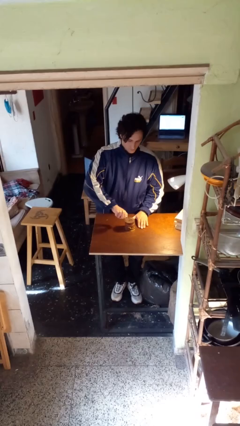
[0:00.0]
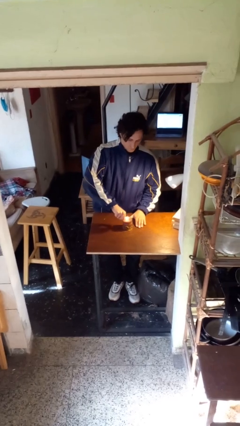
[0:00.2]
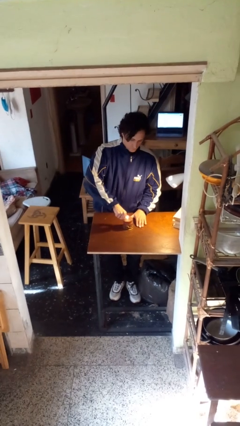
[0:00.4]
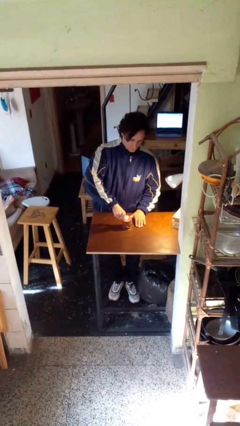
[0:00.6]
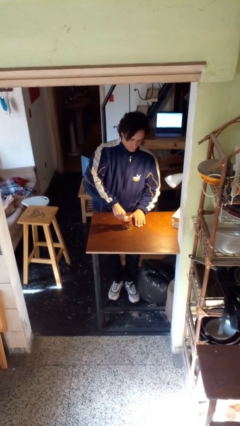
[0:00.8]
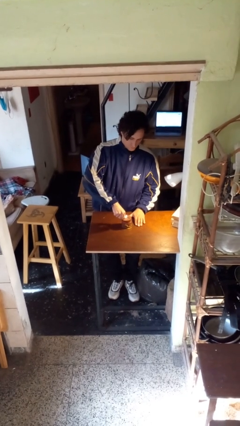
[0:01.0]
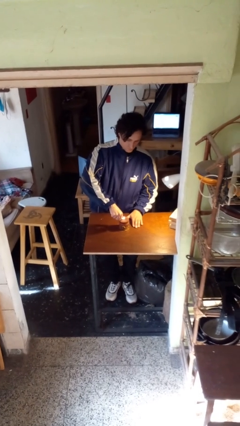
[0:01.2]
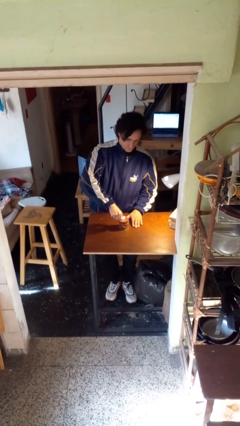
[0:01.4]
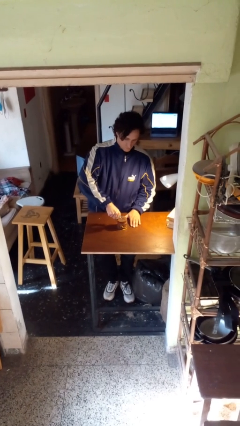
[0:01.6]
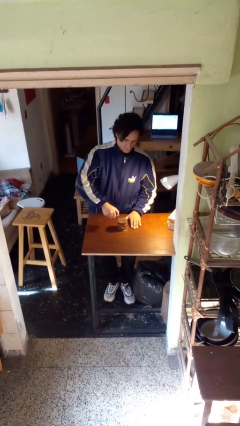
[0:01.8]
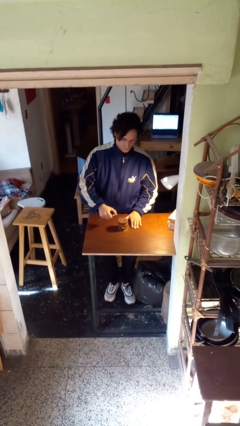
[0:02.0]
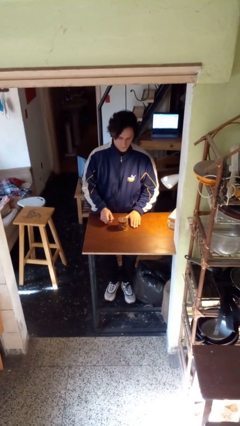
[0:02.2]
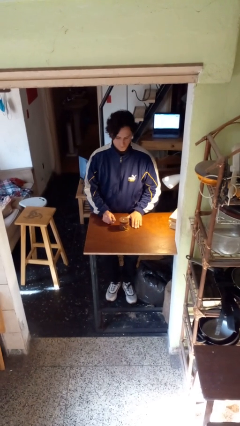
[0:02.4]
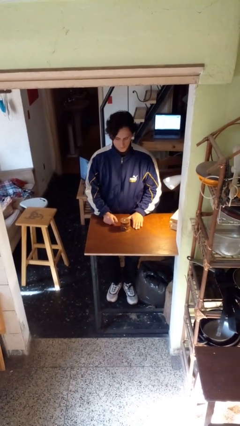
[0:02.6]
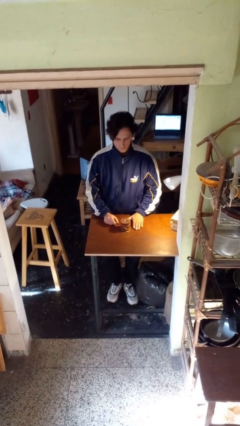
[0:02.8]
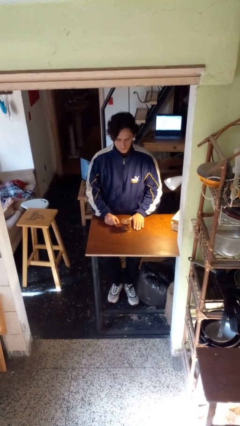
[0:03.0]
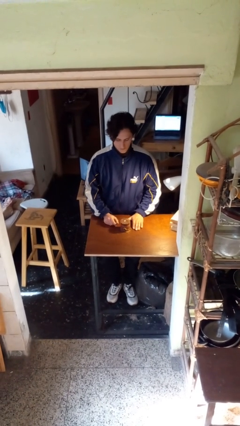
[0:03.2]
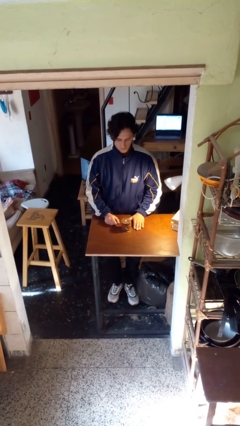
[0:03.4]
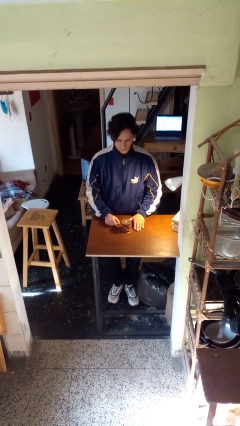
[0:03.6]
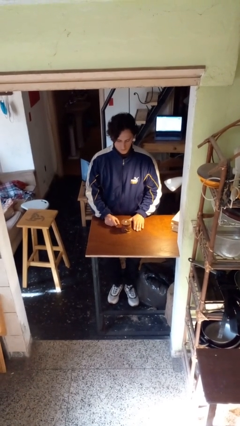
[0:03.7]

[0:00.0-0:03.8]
person lights candle

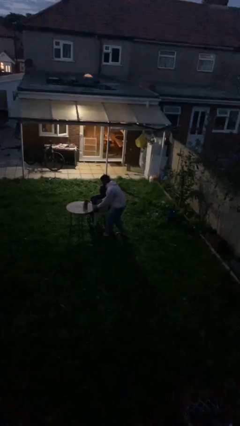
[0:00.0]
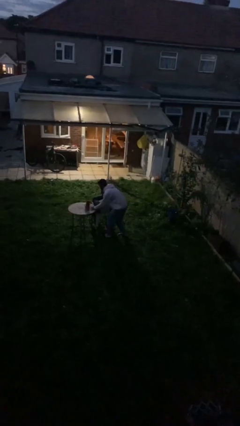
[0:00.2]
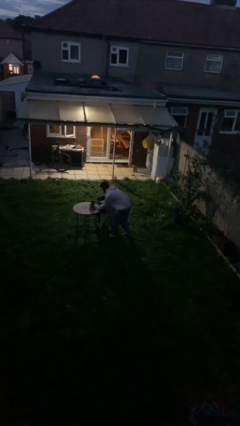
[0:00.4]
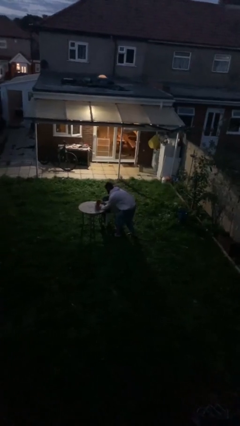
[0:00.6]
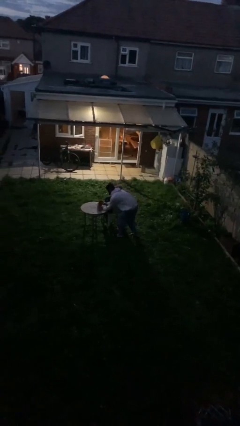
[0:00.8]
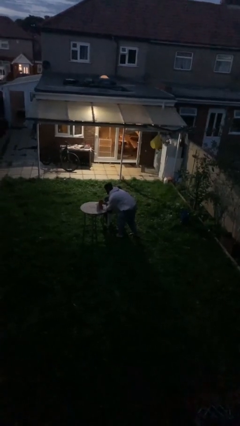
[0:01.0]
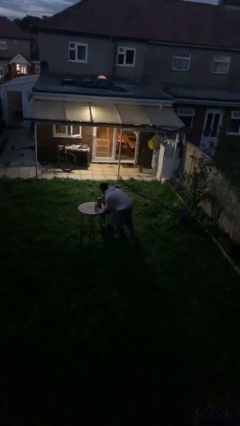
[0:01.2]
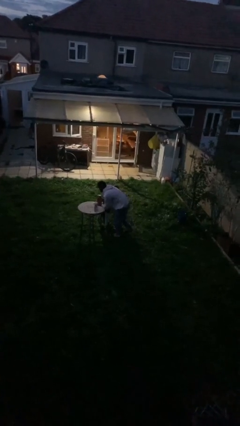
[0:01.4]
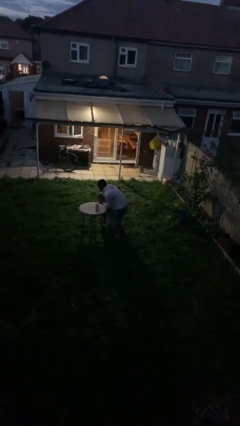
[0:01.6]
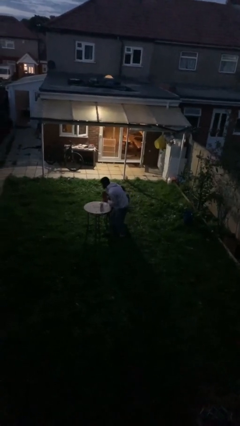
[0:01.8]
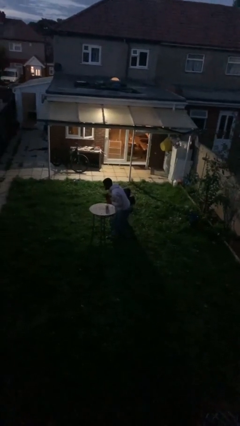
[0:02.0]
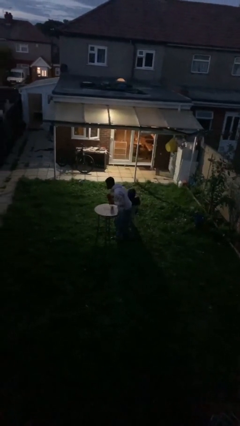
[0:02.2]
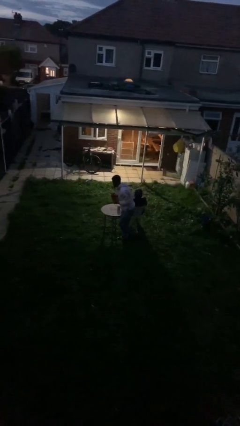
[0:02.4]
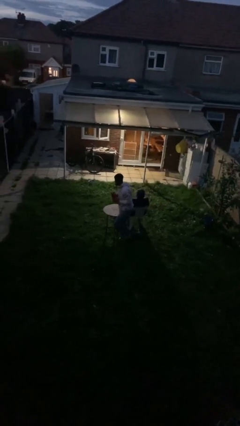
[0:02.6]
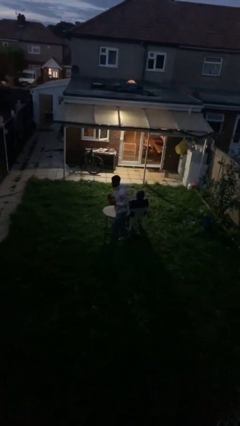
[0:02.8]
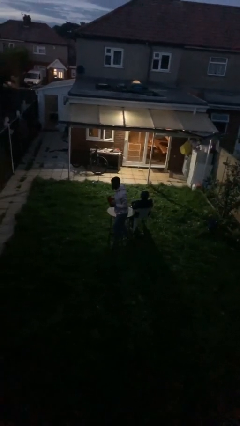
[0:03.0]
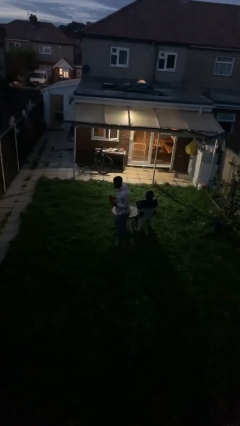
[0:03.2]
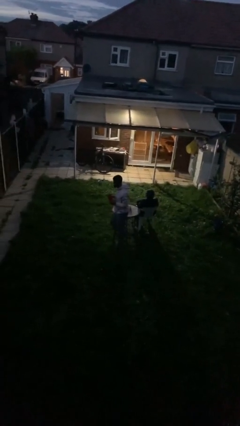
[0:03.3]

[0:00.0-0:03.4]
person steals object from person

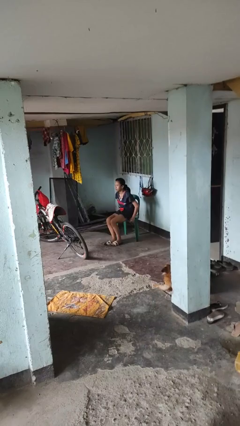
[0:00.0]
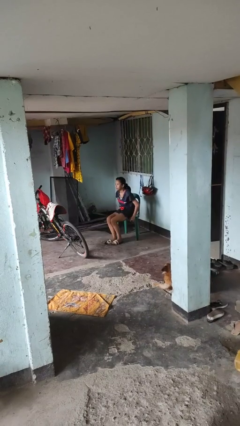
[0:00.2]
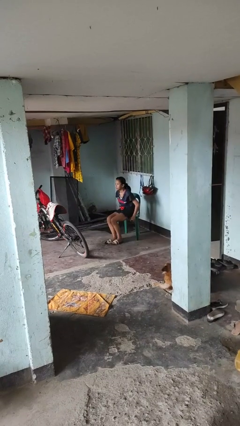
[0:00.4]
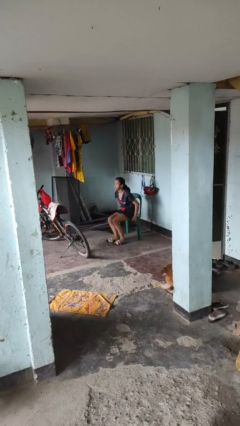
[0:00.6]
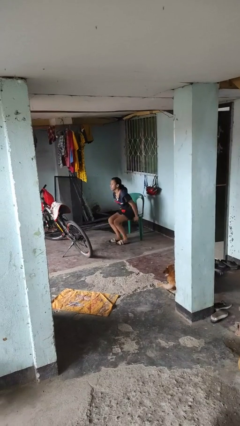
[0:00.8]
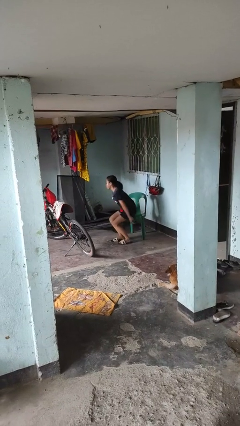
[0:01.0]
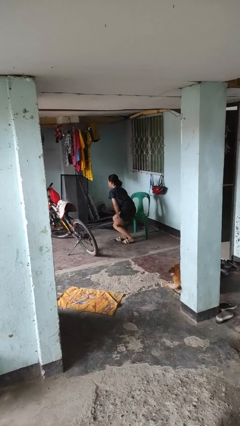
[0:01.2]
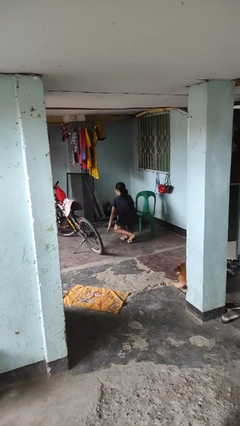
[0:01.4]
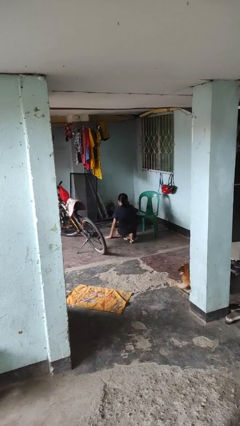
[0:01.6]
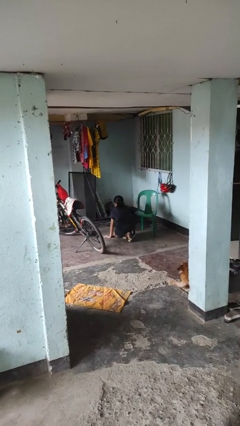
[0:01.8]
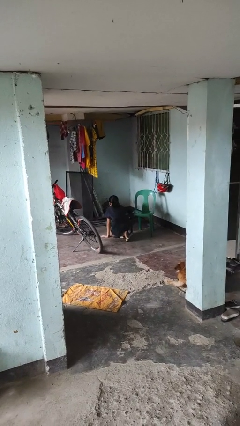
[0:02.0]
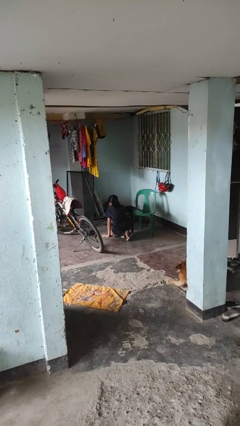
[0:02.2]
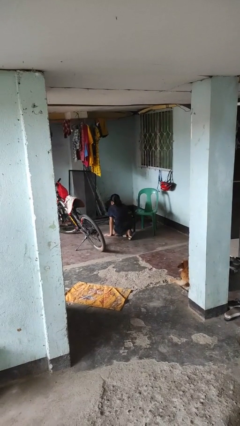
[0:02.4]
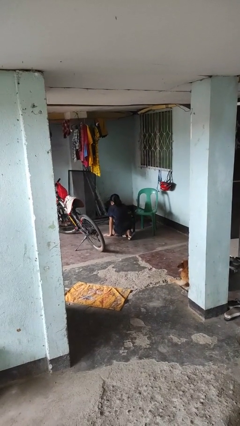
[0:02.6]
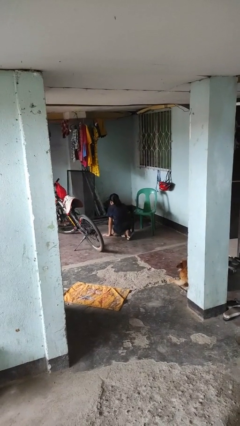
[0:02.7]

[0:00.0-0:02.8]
person falls from chair

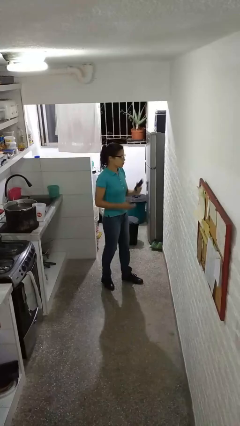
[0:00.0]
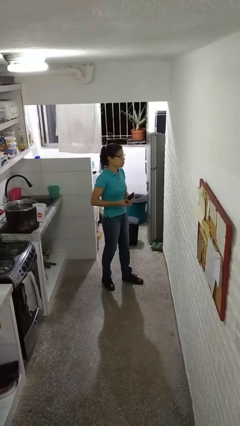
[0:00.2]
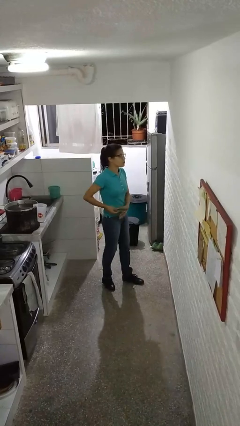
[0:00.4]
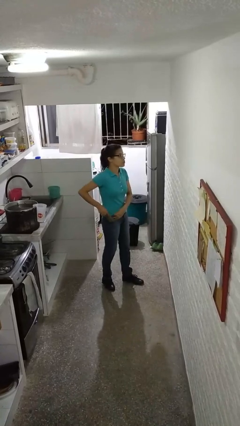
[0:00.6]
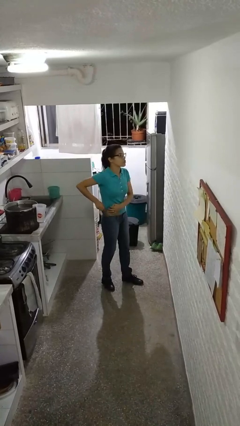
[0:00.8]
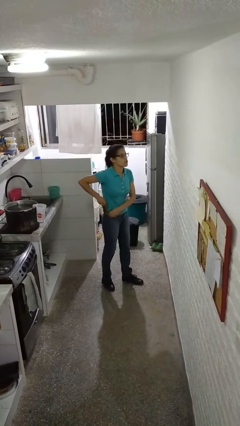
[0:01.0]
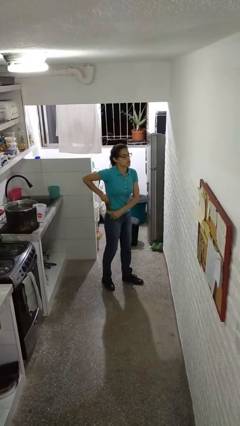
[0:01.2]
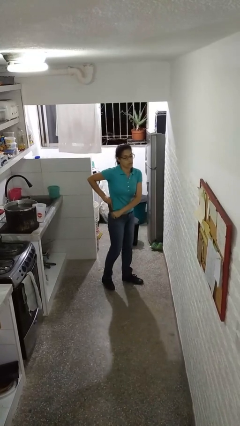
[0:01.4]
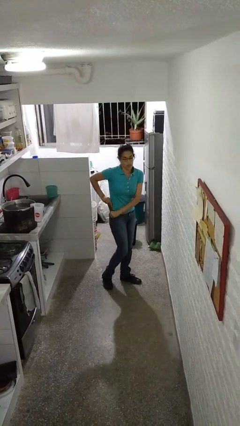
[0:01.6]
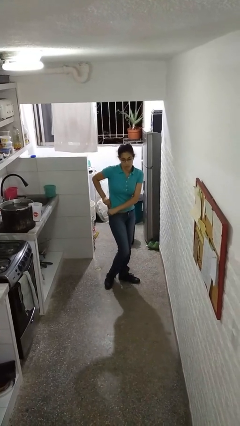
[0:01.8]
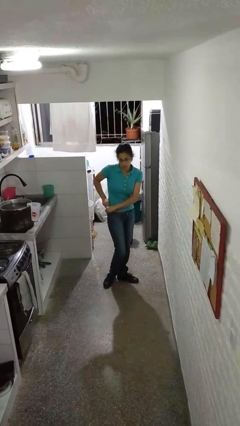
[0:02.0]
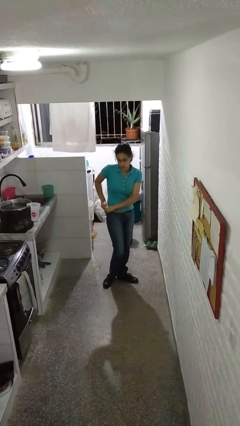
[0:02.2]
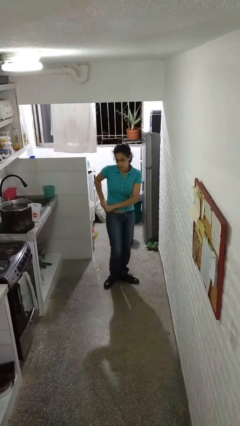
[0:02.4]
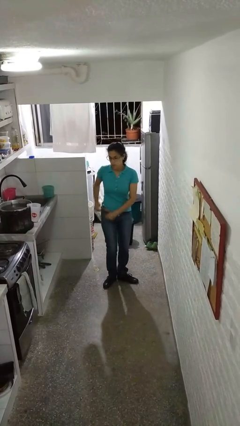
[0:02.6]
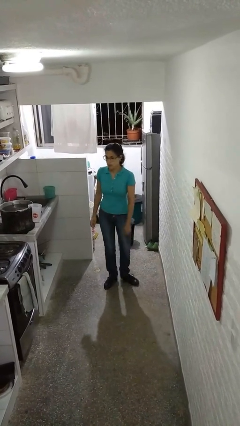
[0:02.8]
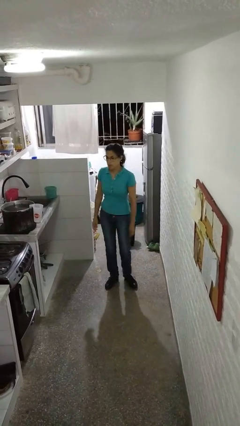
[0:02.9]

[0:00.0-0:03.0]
person puts phone into pocket

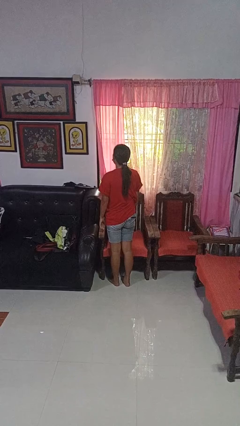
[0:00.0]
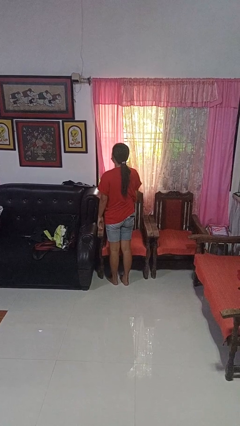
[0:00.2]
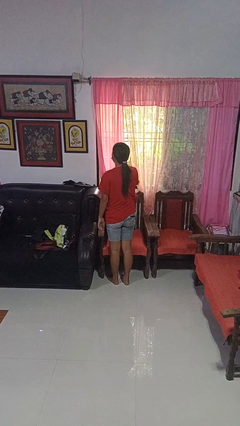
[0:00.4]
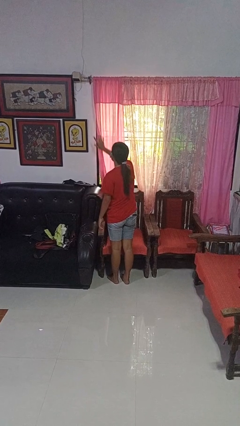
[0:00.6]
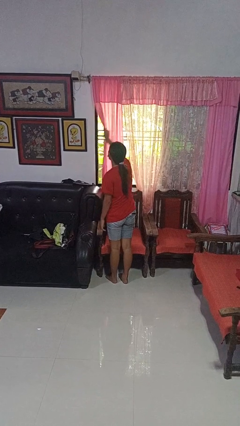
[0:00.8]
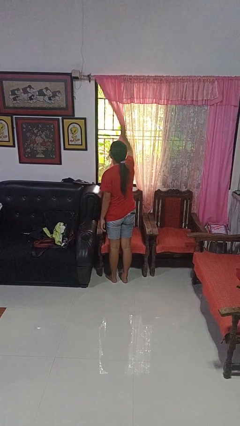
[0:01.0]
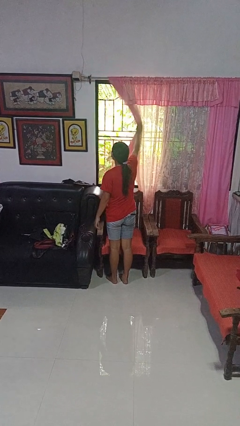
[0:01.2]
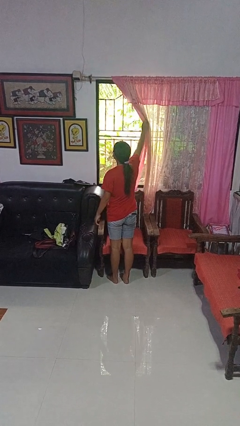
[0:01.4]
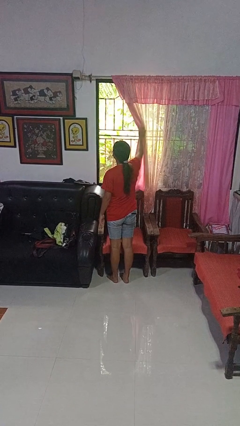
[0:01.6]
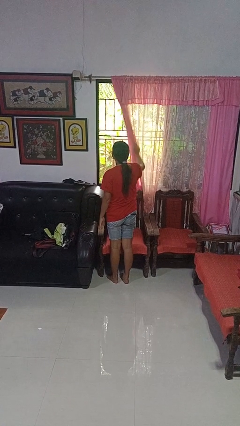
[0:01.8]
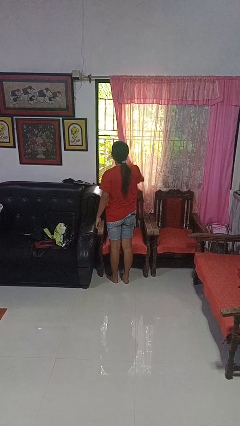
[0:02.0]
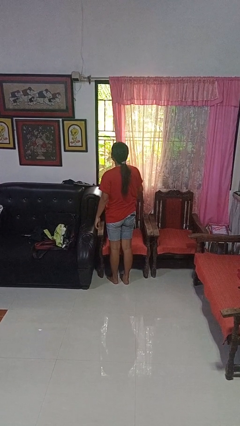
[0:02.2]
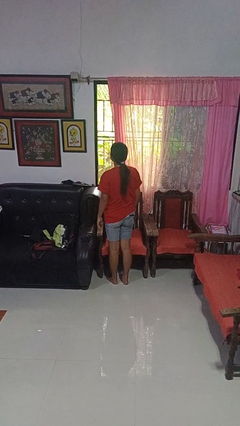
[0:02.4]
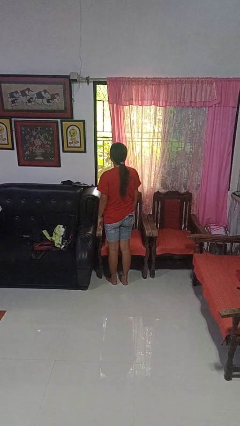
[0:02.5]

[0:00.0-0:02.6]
person opens curtains

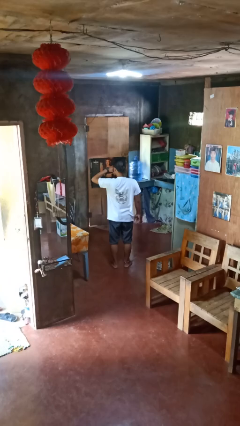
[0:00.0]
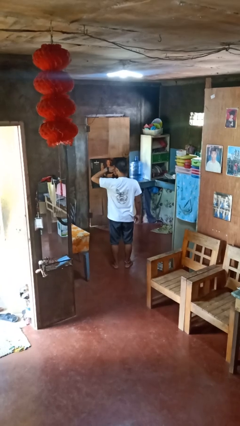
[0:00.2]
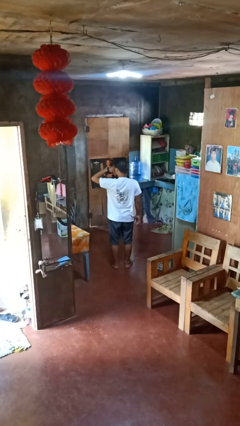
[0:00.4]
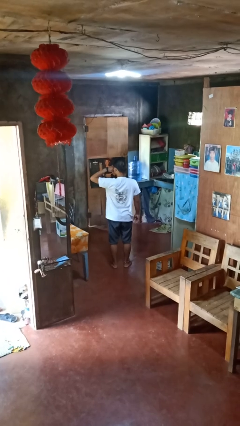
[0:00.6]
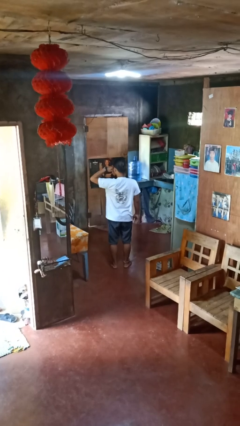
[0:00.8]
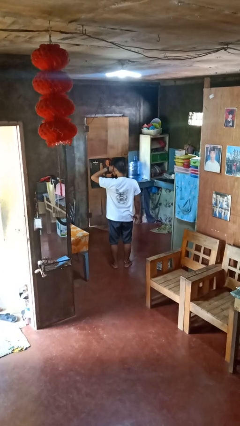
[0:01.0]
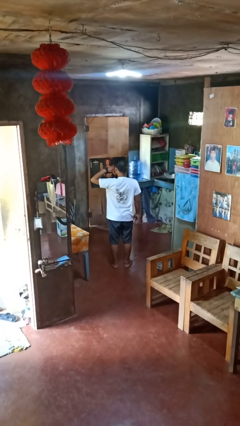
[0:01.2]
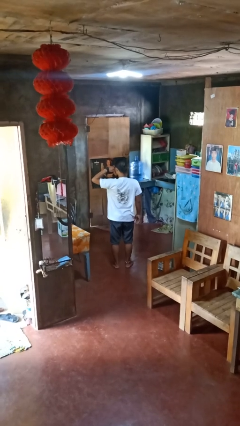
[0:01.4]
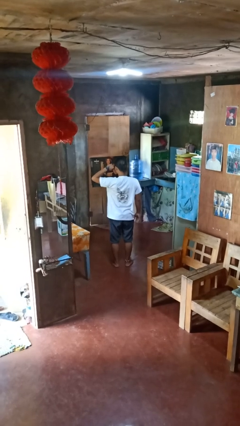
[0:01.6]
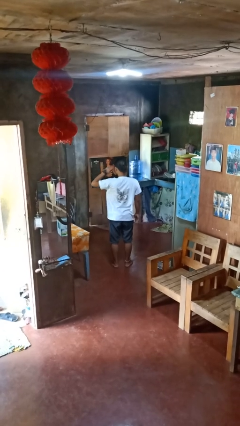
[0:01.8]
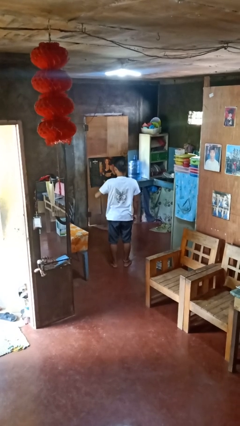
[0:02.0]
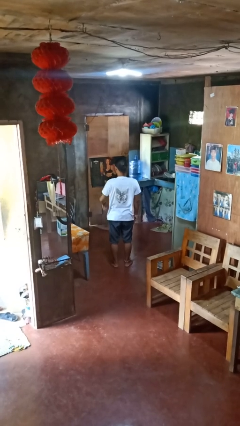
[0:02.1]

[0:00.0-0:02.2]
person rubs eyes
